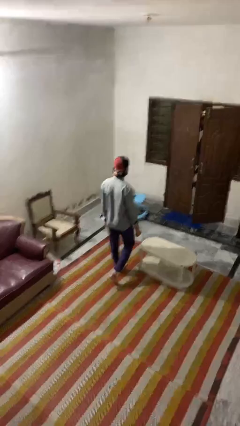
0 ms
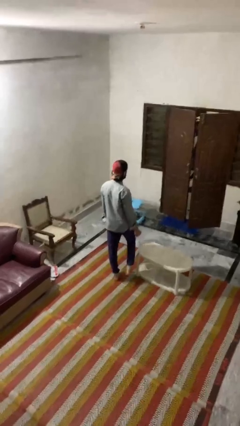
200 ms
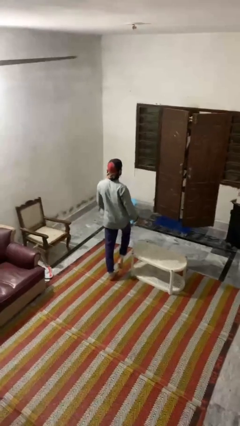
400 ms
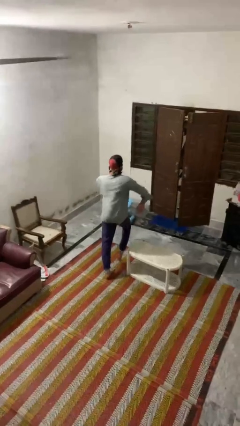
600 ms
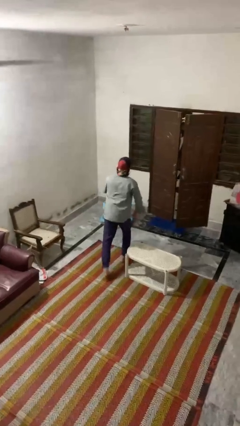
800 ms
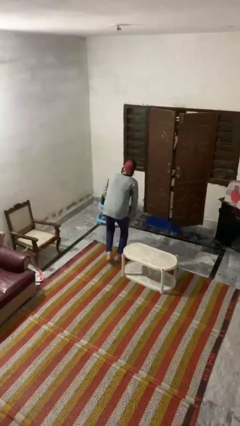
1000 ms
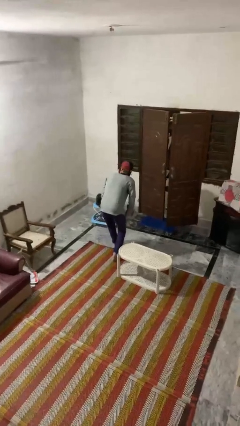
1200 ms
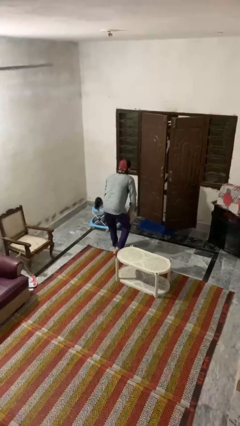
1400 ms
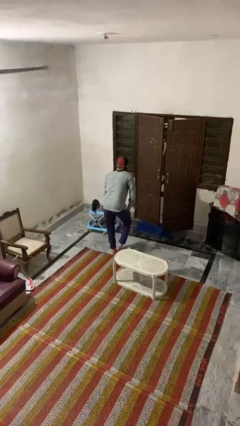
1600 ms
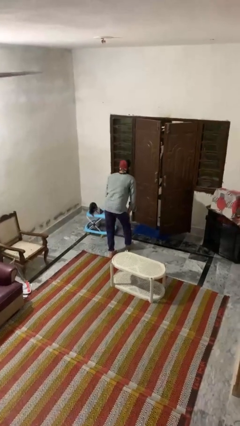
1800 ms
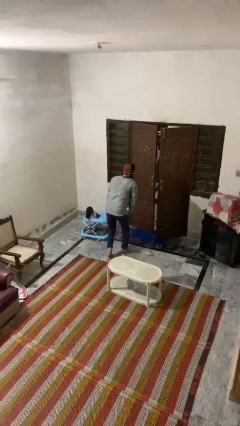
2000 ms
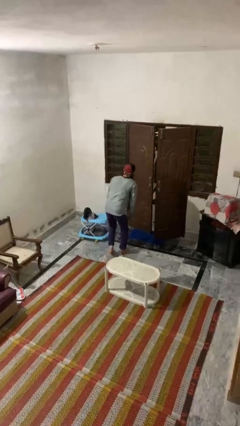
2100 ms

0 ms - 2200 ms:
person bumps into table

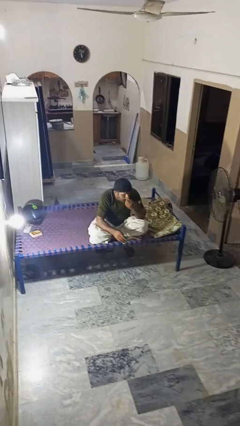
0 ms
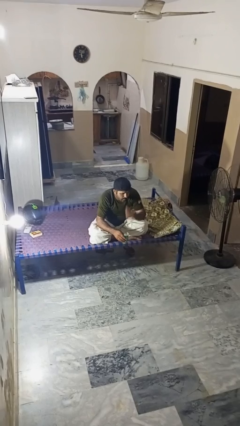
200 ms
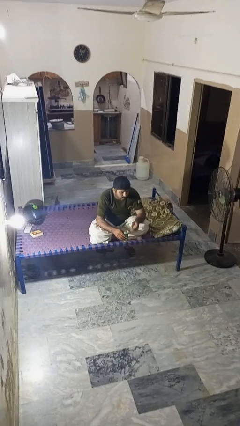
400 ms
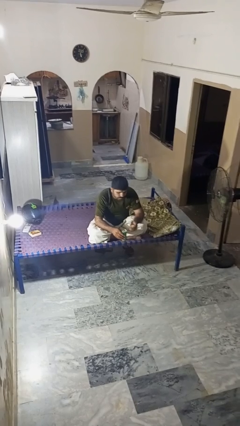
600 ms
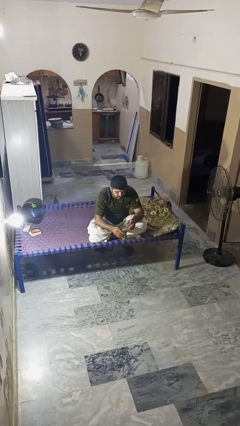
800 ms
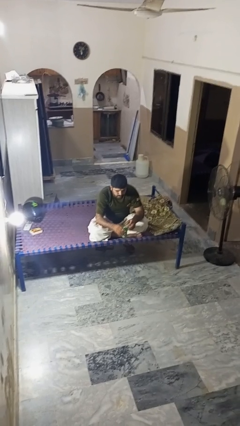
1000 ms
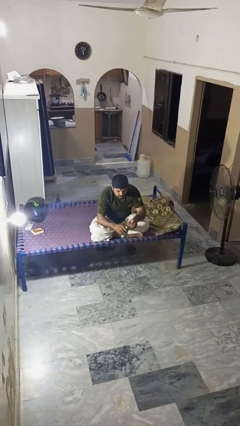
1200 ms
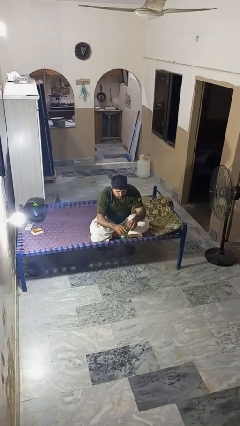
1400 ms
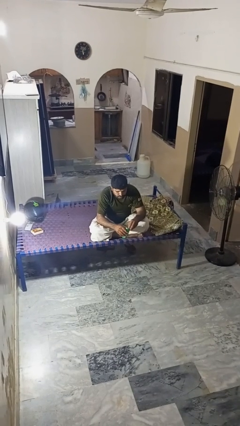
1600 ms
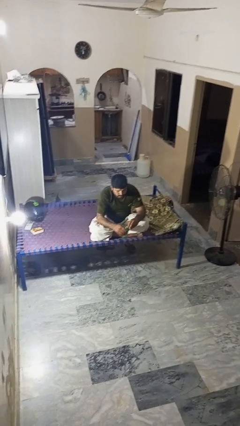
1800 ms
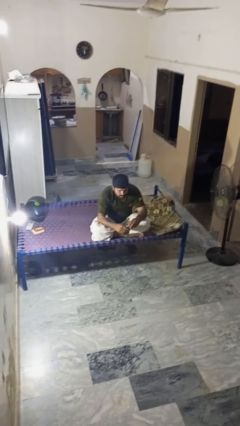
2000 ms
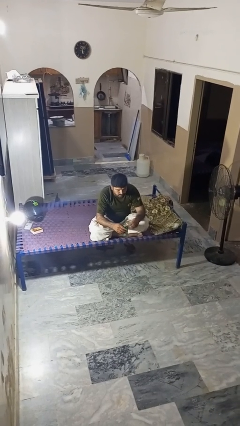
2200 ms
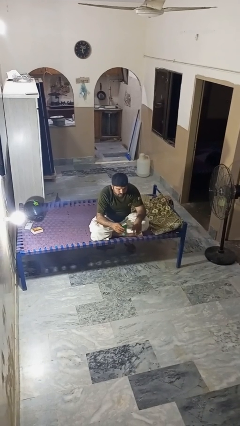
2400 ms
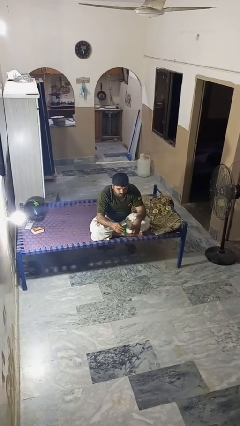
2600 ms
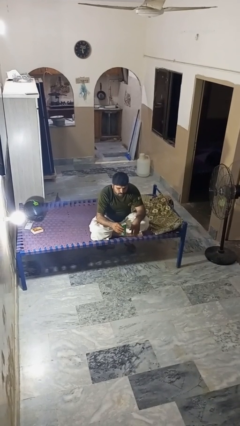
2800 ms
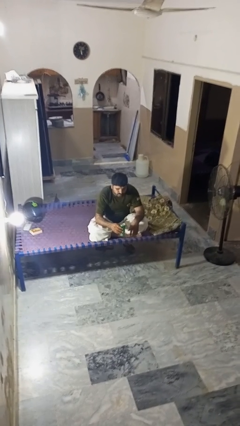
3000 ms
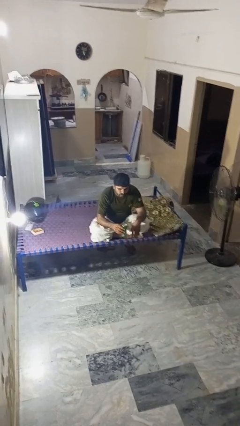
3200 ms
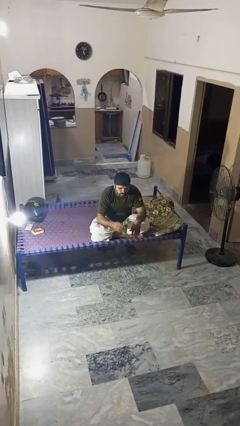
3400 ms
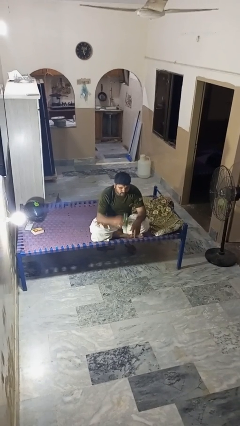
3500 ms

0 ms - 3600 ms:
person opens beverage can

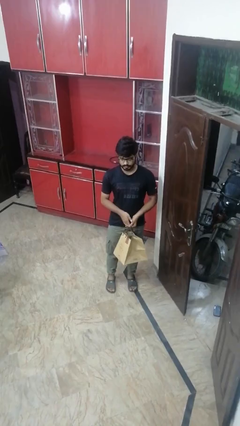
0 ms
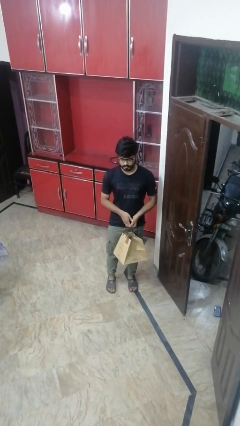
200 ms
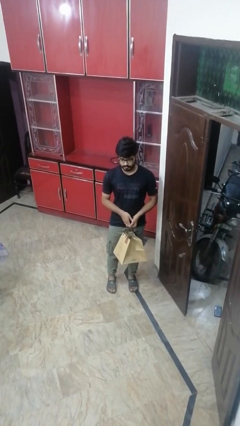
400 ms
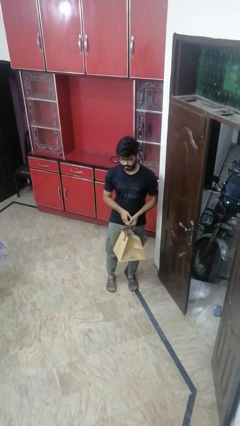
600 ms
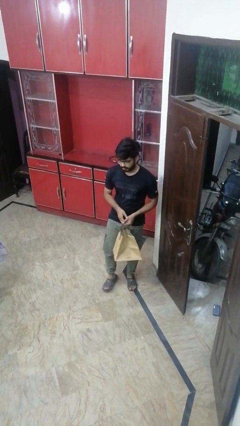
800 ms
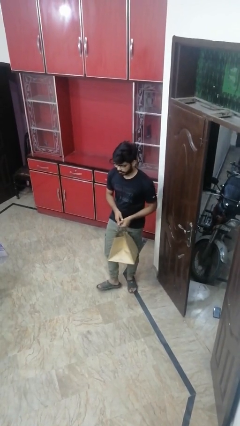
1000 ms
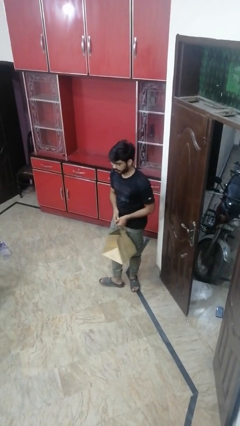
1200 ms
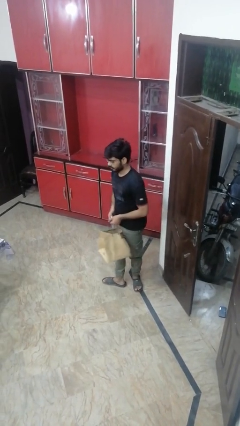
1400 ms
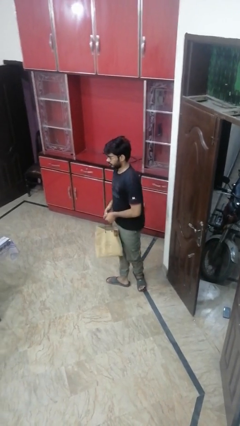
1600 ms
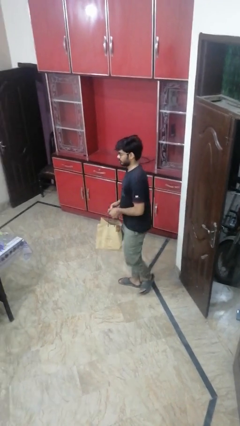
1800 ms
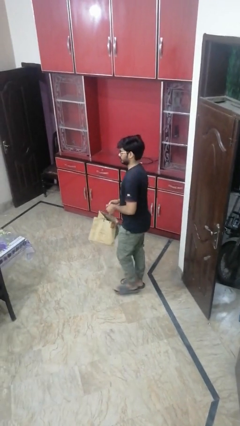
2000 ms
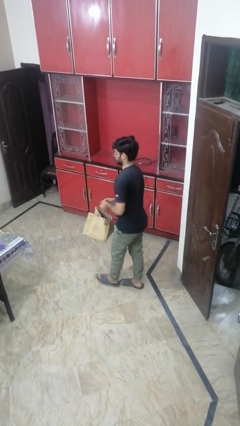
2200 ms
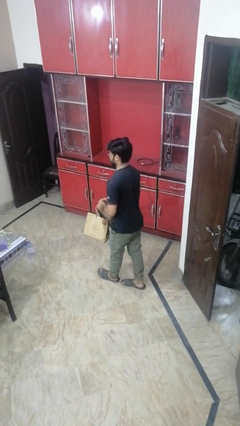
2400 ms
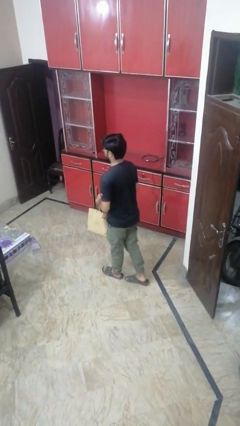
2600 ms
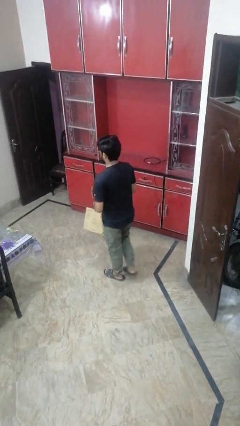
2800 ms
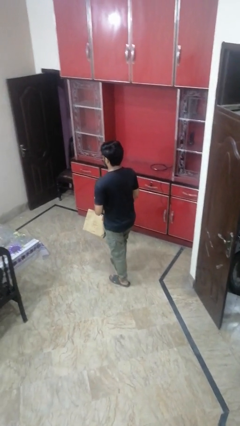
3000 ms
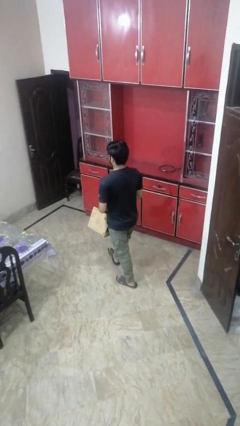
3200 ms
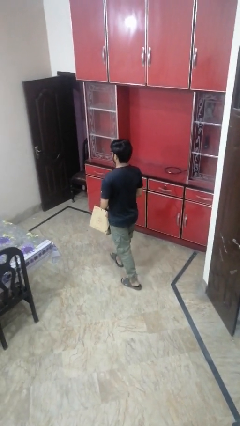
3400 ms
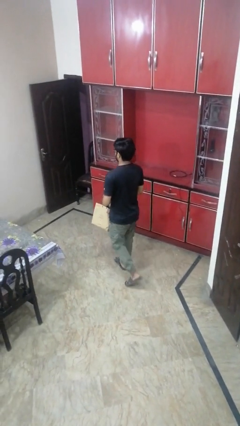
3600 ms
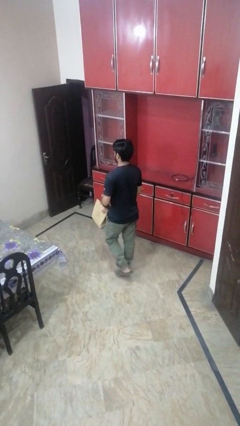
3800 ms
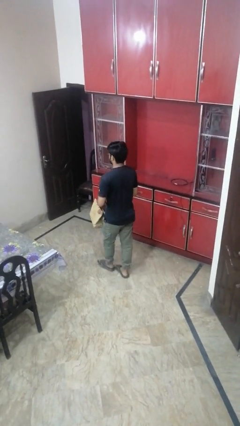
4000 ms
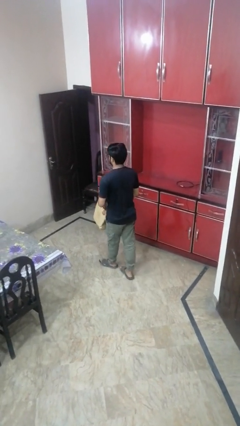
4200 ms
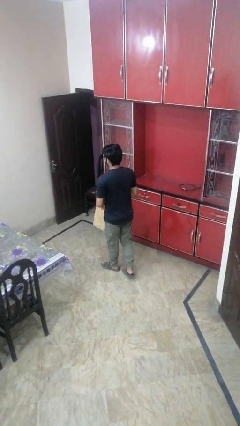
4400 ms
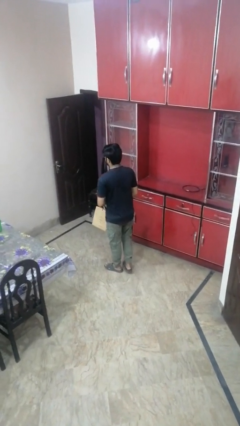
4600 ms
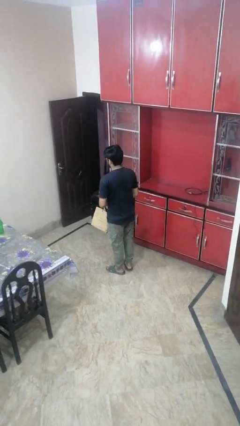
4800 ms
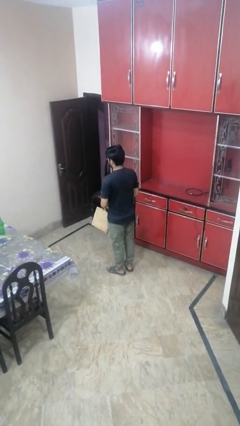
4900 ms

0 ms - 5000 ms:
person carries groceries

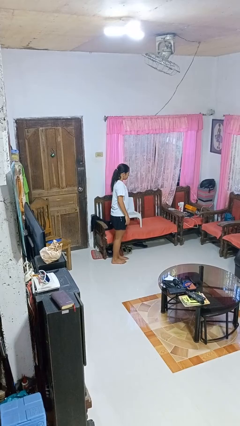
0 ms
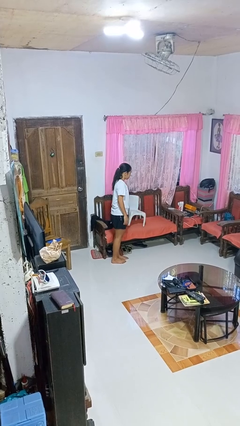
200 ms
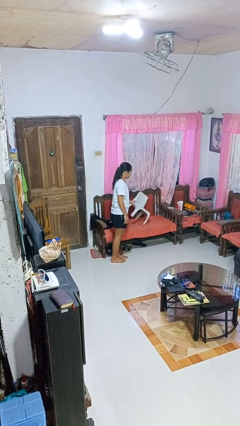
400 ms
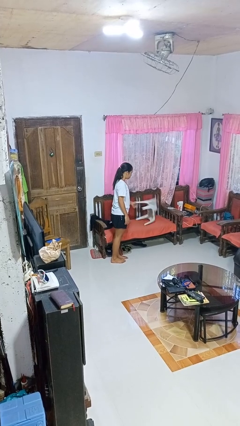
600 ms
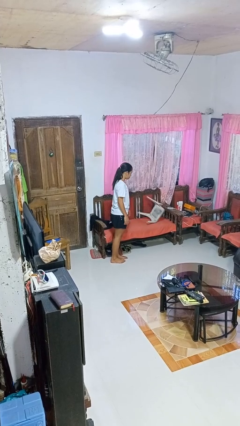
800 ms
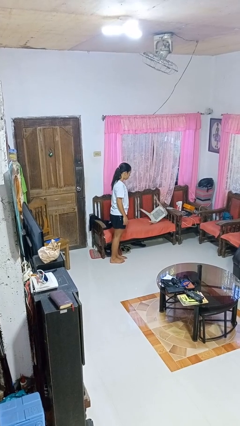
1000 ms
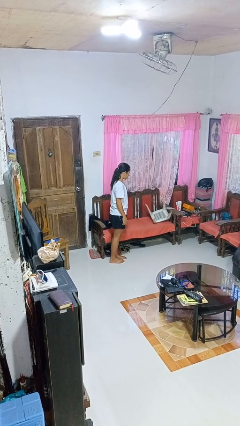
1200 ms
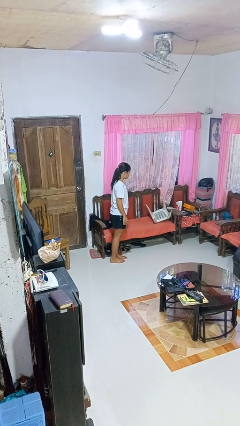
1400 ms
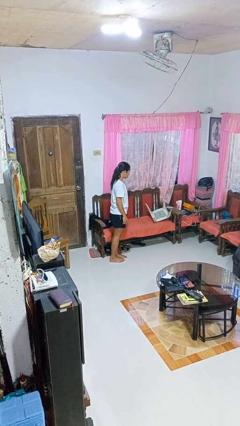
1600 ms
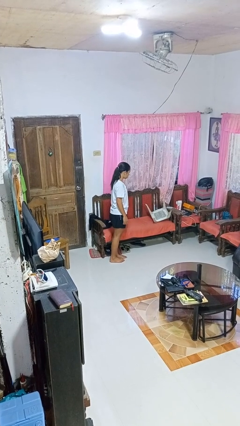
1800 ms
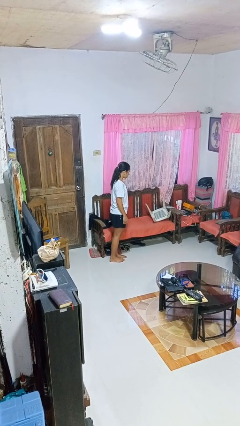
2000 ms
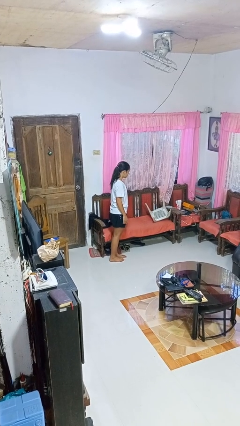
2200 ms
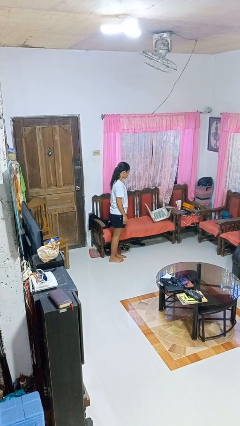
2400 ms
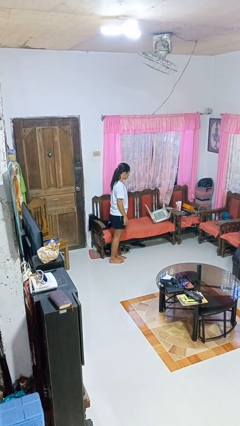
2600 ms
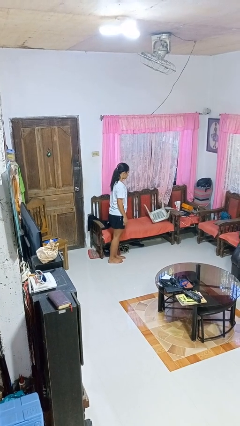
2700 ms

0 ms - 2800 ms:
person knocks over furniture

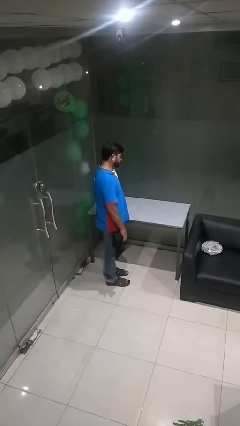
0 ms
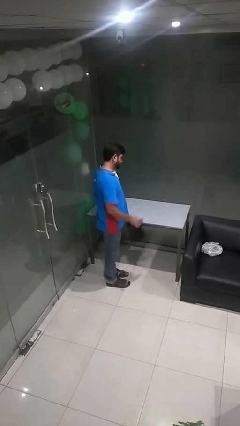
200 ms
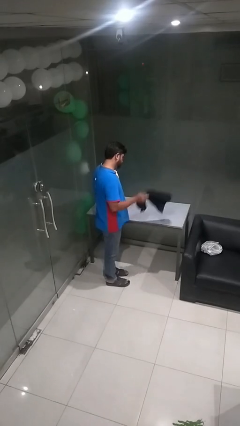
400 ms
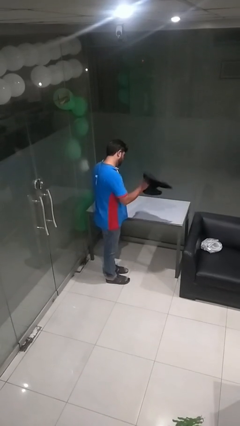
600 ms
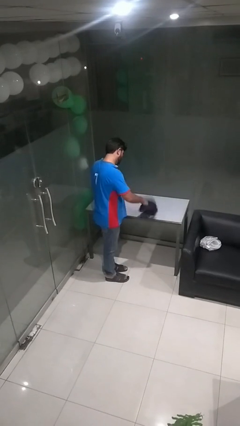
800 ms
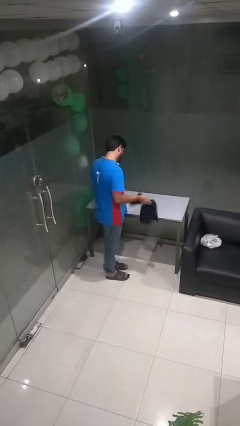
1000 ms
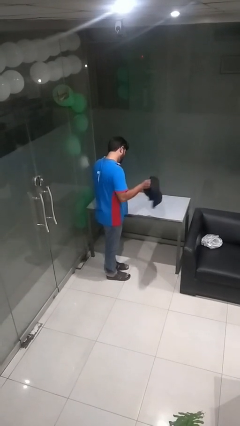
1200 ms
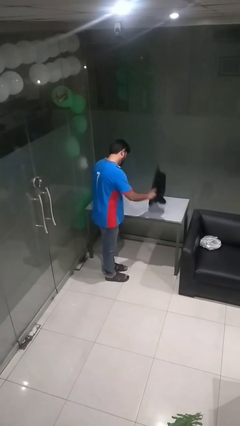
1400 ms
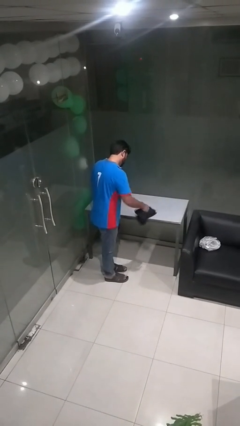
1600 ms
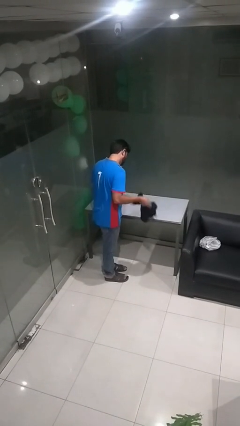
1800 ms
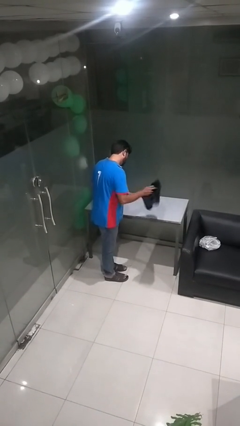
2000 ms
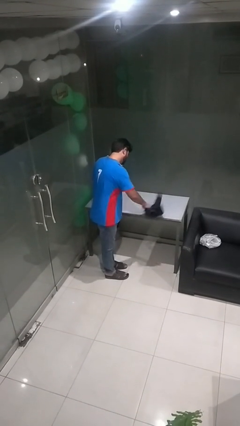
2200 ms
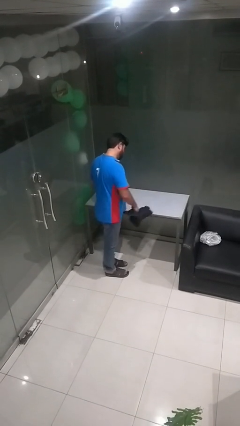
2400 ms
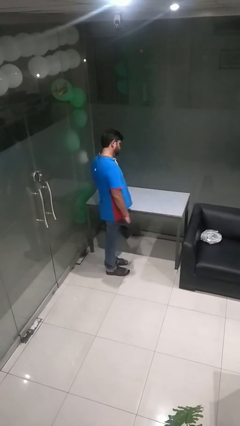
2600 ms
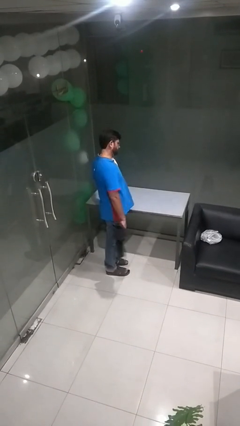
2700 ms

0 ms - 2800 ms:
person dusts furniture

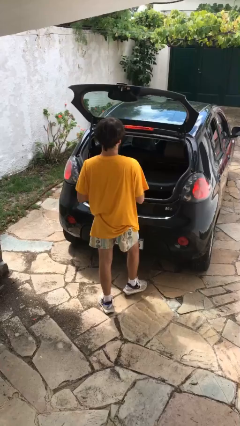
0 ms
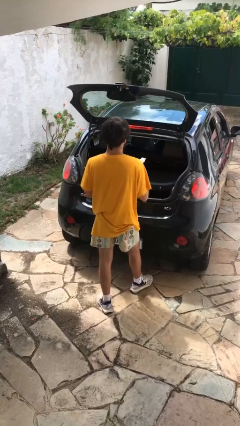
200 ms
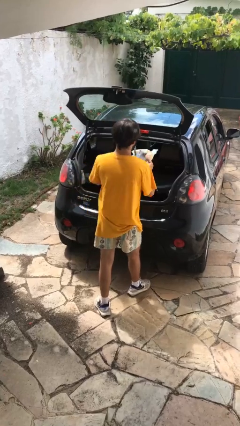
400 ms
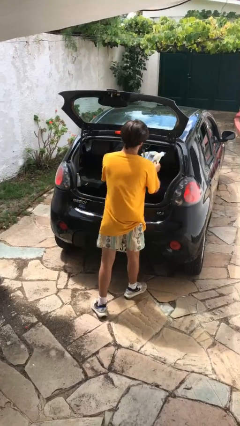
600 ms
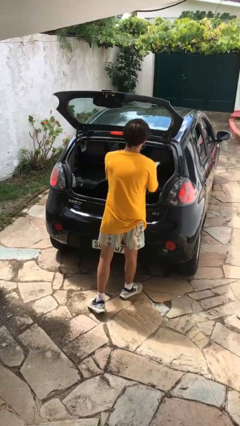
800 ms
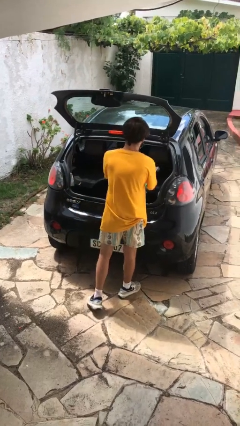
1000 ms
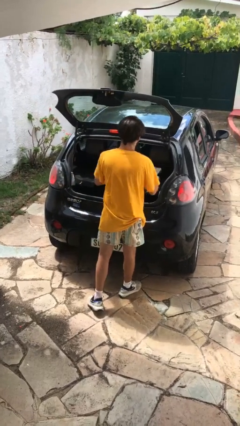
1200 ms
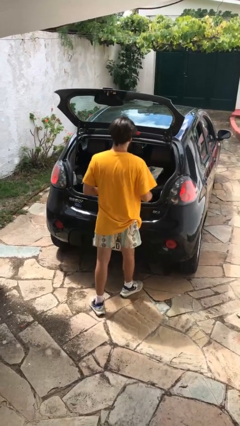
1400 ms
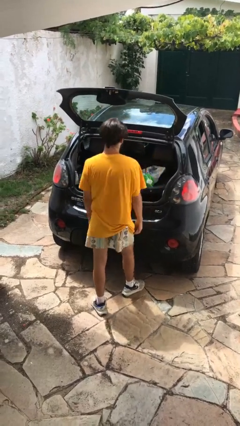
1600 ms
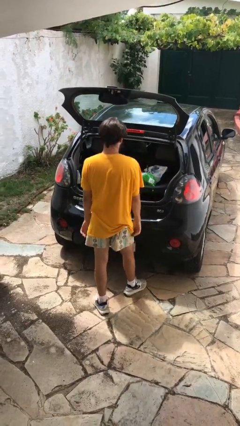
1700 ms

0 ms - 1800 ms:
person loads car
